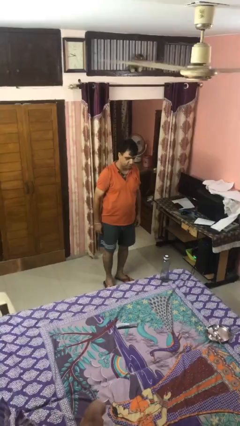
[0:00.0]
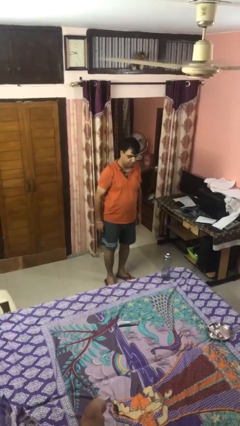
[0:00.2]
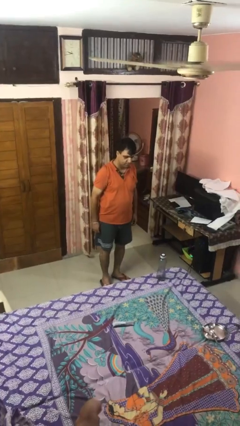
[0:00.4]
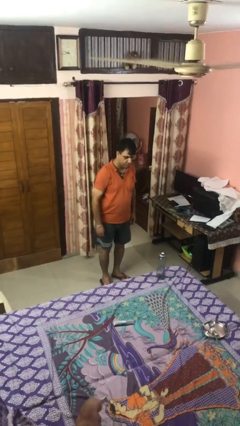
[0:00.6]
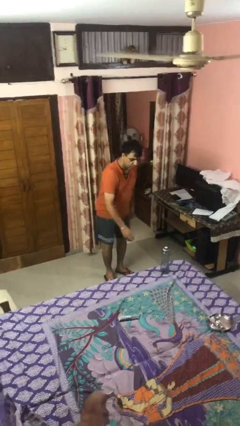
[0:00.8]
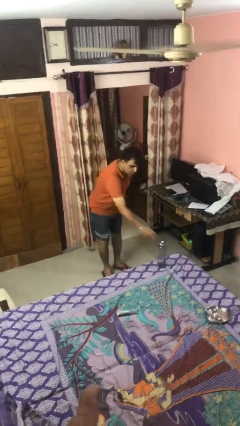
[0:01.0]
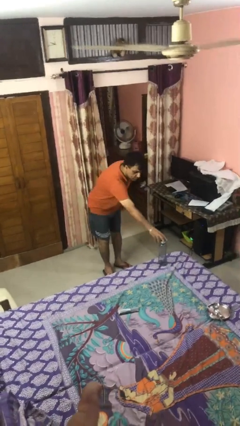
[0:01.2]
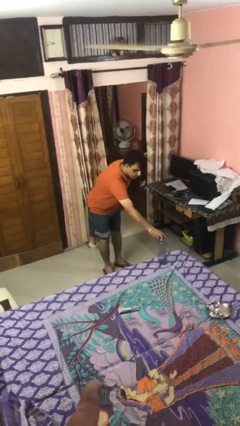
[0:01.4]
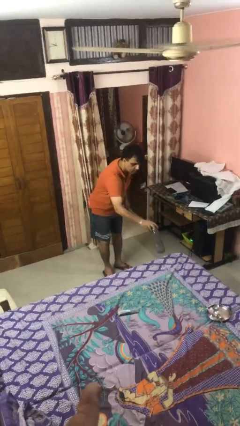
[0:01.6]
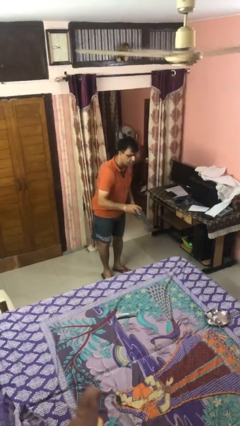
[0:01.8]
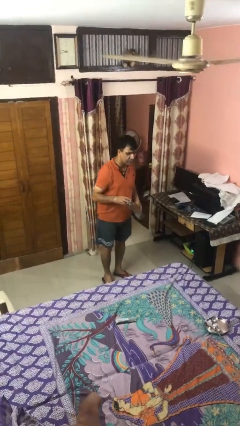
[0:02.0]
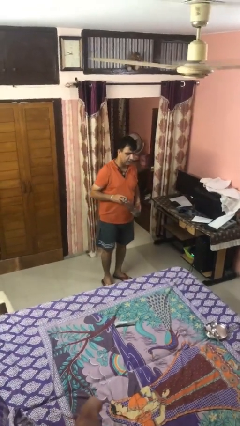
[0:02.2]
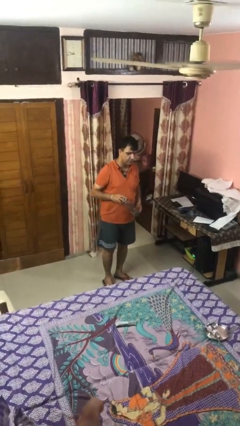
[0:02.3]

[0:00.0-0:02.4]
person picks up object from bed

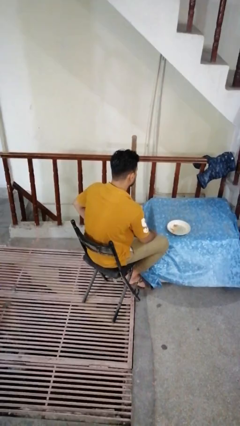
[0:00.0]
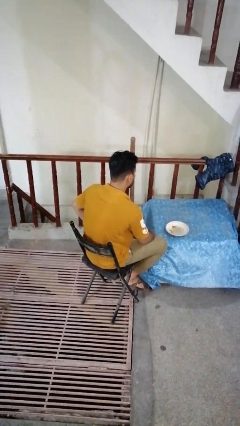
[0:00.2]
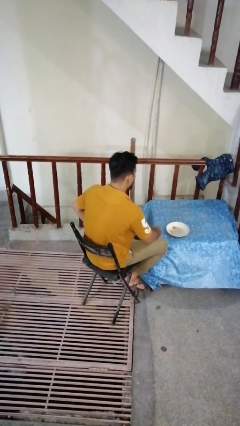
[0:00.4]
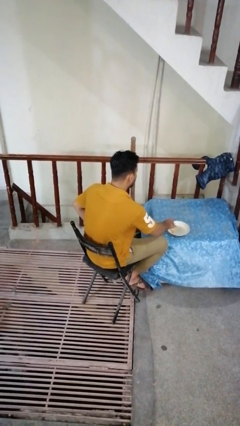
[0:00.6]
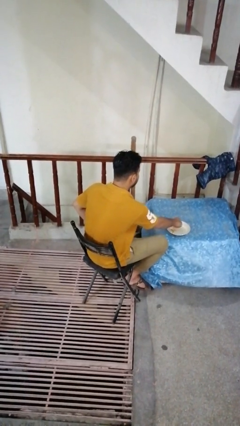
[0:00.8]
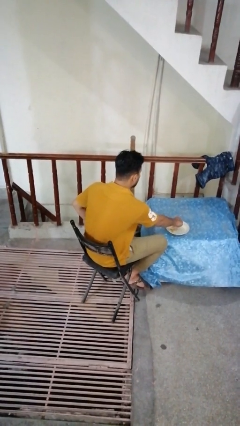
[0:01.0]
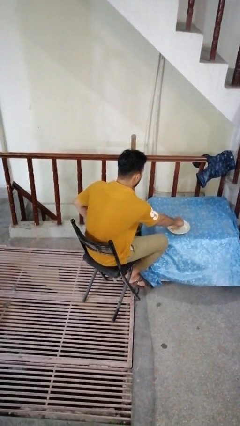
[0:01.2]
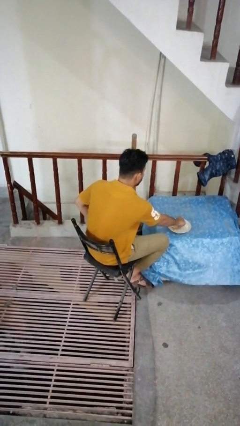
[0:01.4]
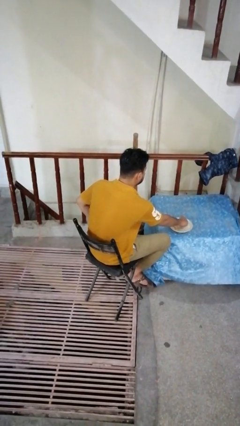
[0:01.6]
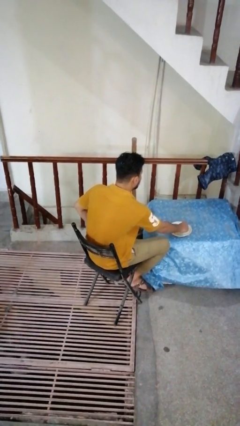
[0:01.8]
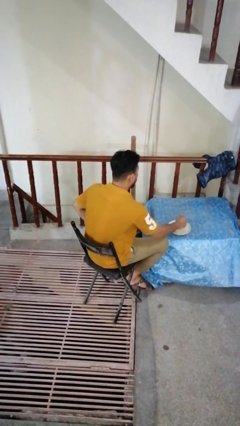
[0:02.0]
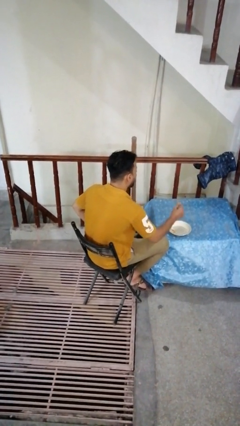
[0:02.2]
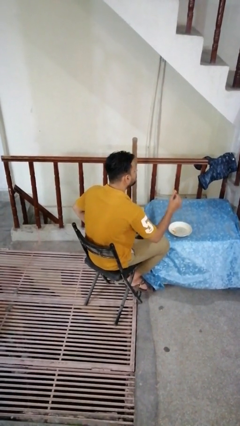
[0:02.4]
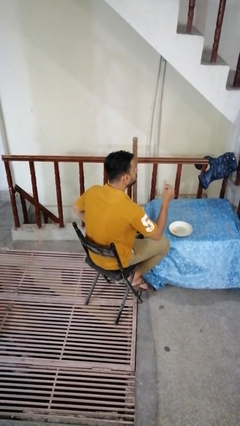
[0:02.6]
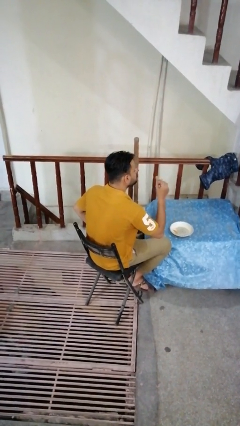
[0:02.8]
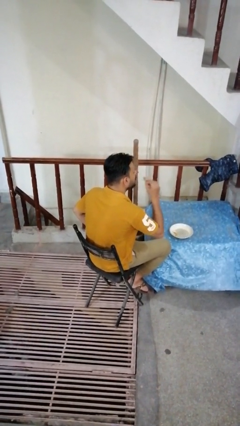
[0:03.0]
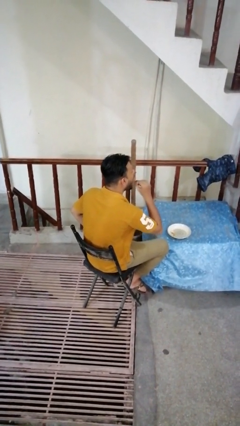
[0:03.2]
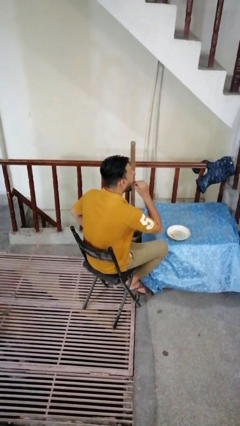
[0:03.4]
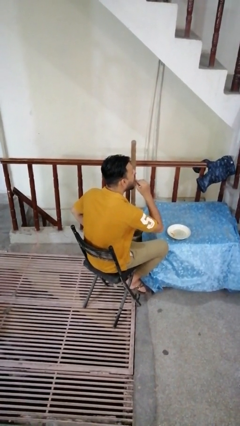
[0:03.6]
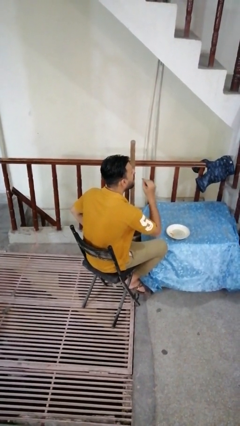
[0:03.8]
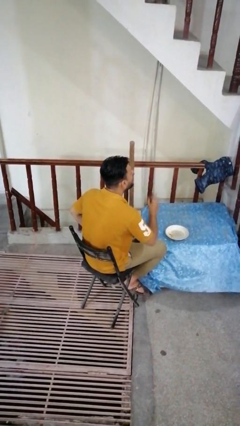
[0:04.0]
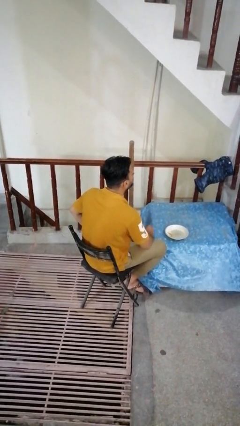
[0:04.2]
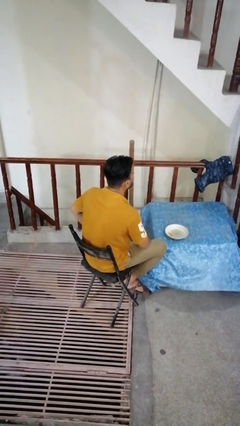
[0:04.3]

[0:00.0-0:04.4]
person eats with hands

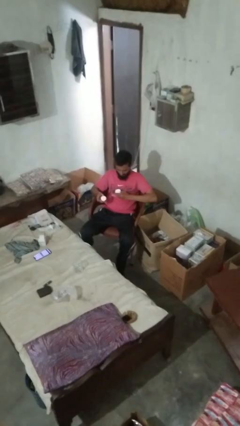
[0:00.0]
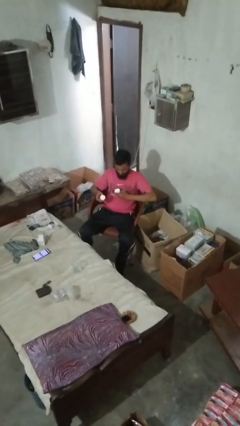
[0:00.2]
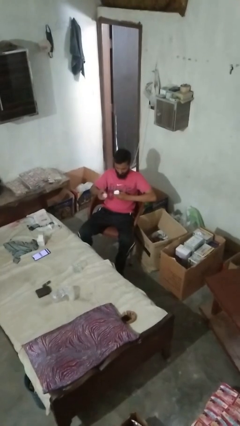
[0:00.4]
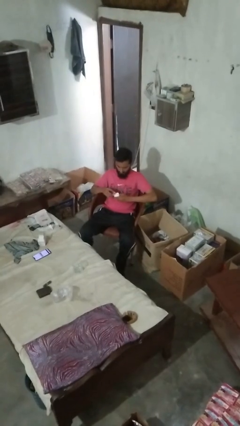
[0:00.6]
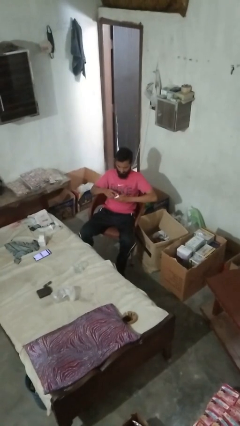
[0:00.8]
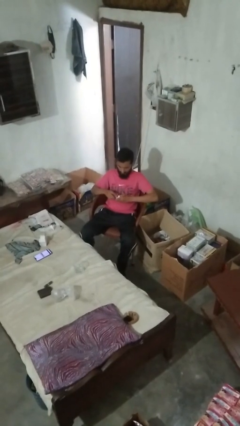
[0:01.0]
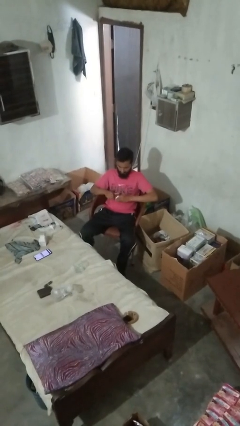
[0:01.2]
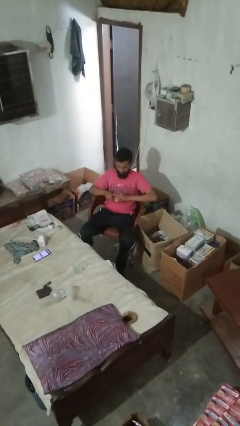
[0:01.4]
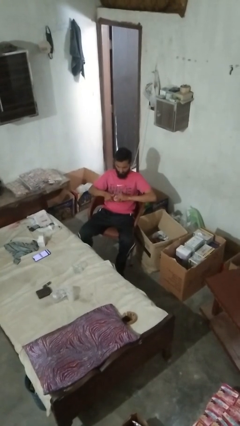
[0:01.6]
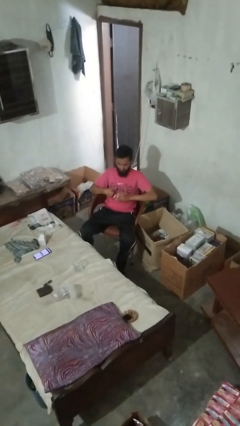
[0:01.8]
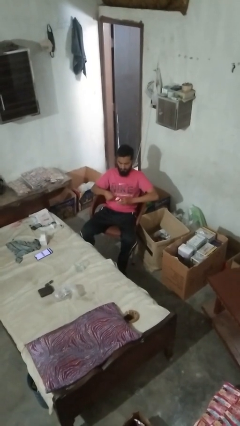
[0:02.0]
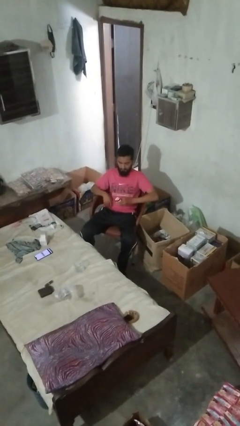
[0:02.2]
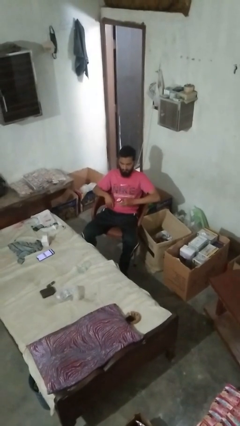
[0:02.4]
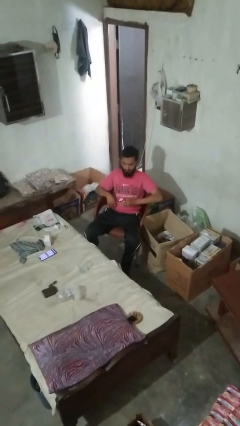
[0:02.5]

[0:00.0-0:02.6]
person closes jar

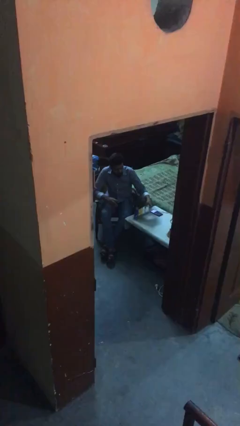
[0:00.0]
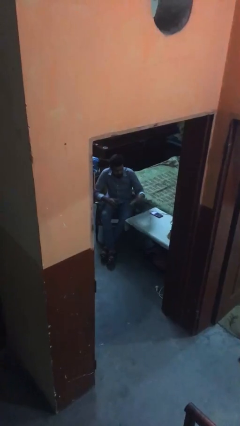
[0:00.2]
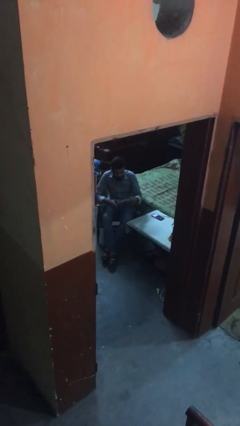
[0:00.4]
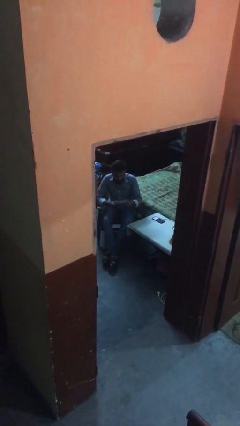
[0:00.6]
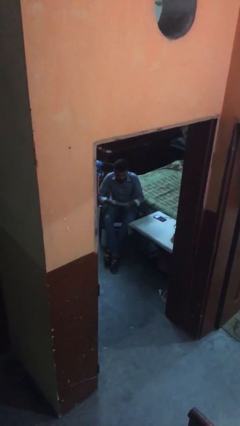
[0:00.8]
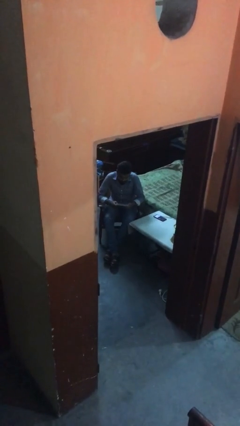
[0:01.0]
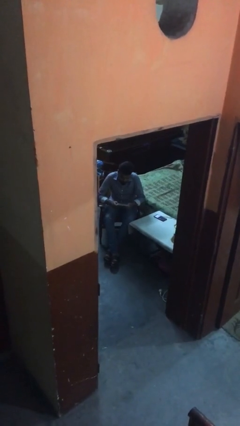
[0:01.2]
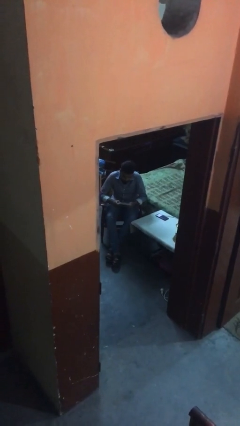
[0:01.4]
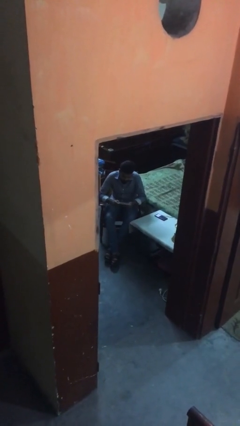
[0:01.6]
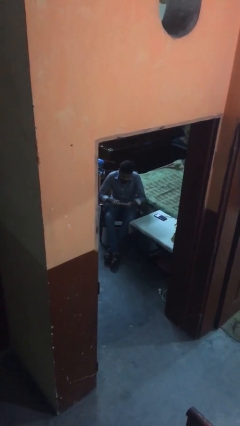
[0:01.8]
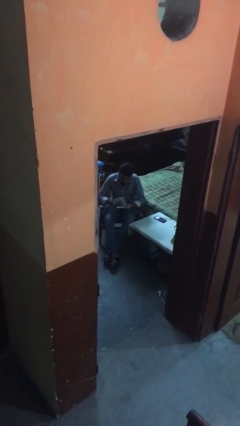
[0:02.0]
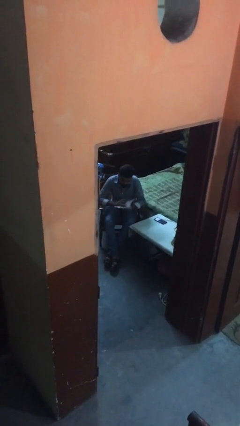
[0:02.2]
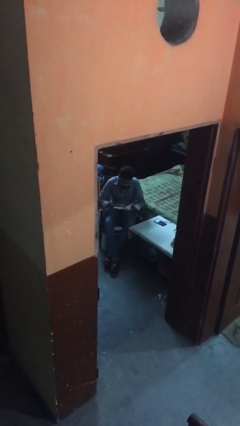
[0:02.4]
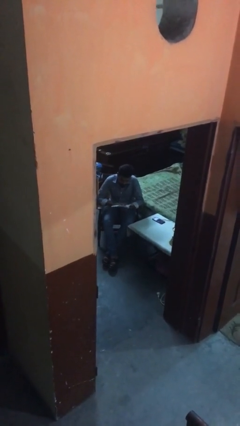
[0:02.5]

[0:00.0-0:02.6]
person picks up object from table

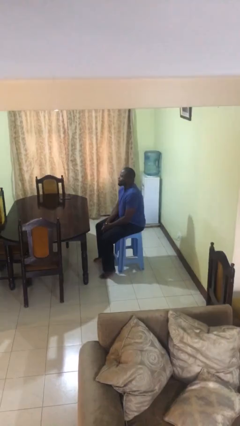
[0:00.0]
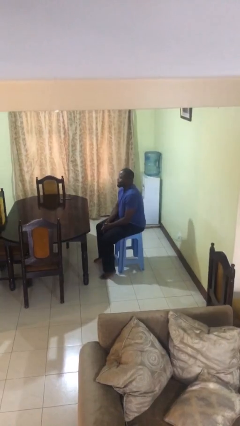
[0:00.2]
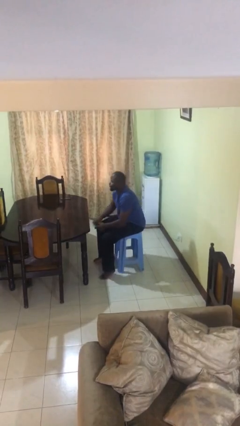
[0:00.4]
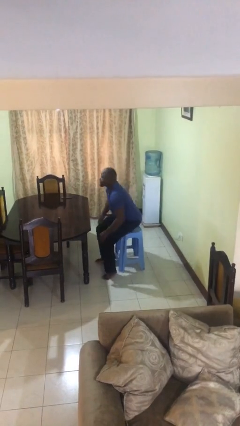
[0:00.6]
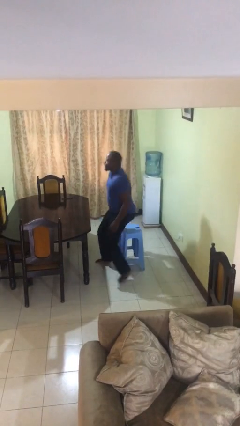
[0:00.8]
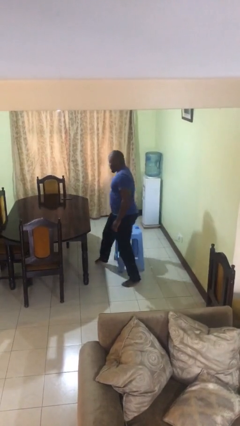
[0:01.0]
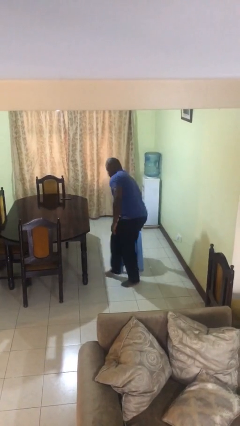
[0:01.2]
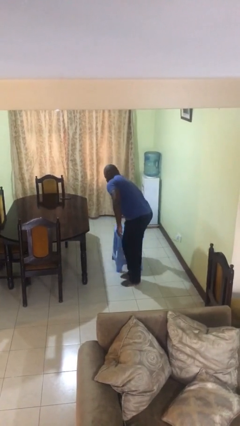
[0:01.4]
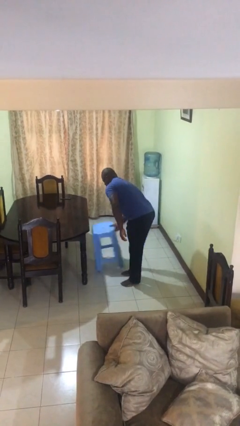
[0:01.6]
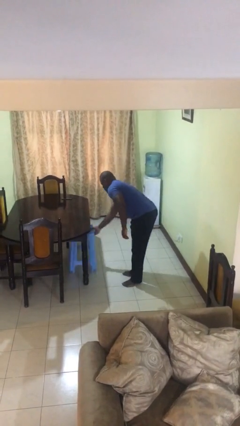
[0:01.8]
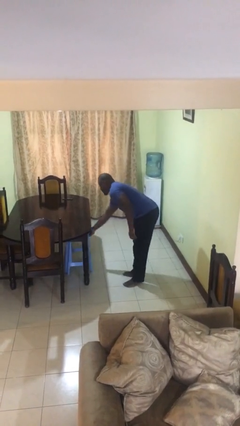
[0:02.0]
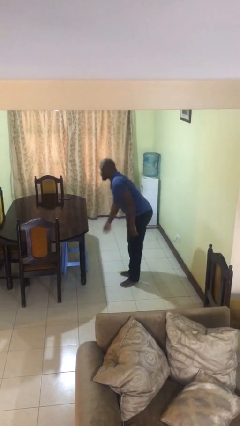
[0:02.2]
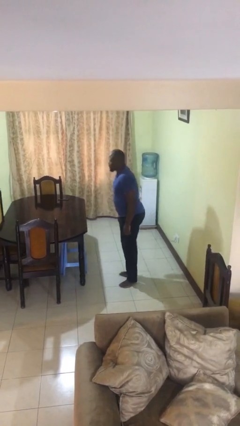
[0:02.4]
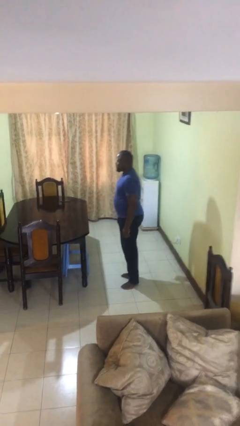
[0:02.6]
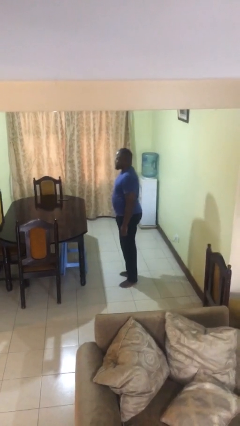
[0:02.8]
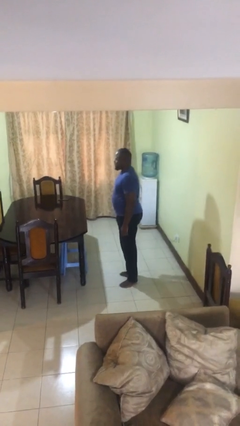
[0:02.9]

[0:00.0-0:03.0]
person stands up

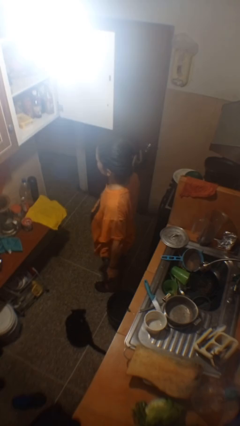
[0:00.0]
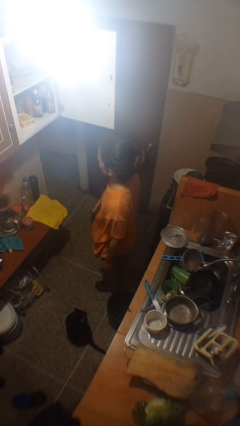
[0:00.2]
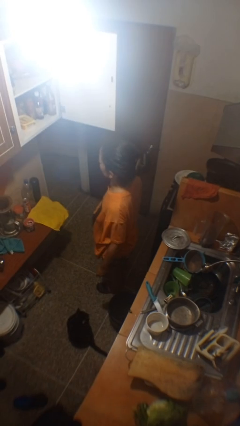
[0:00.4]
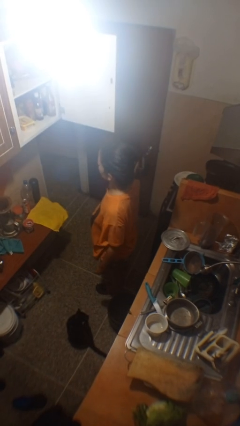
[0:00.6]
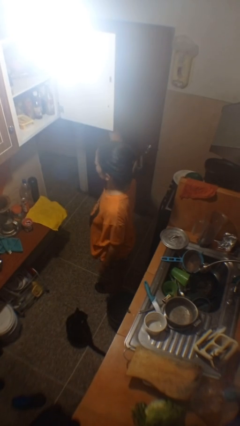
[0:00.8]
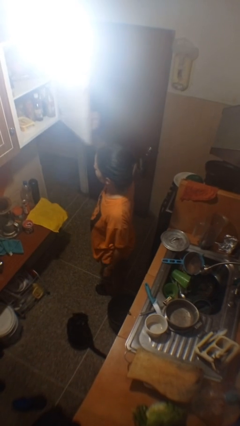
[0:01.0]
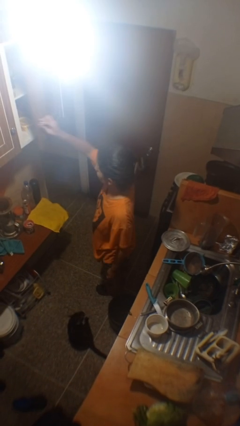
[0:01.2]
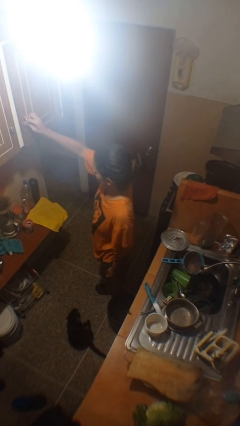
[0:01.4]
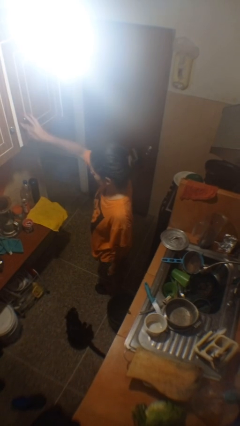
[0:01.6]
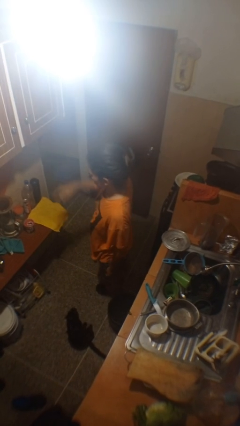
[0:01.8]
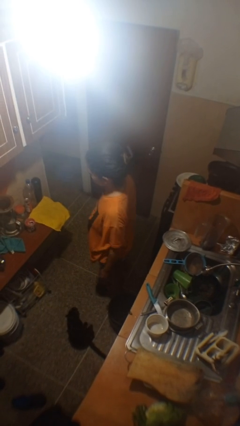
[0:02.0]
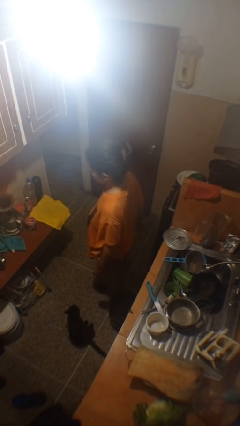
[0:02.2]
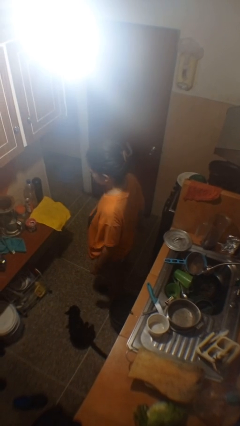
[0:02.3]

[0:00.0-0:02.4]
person closes cabinet
